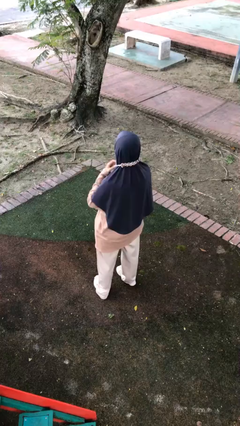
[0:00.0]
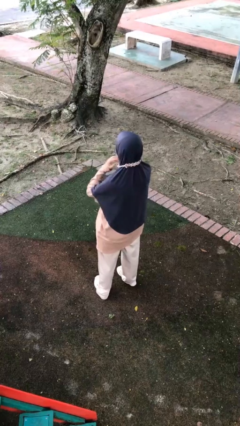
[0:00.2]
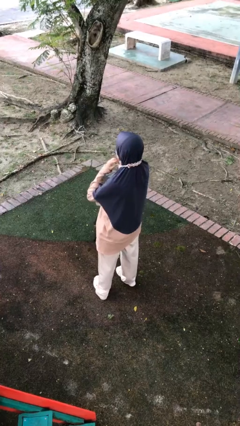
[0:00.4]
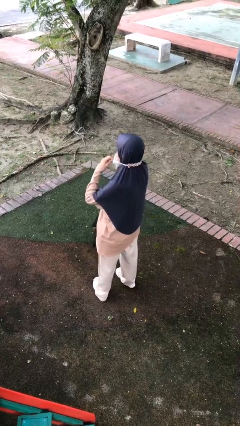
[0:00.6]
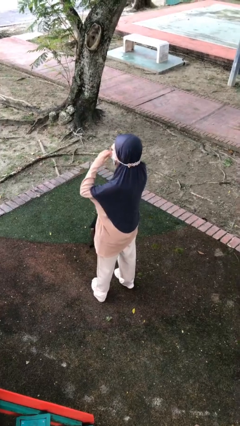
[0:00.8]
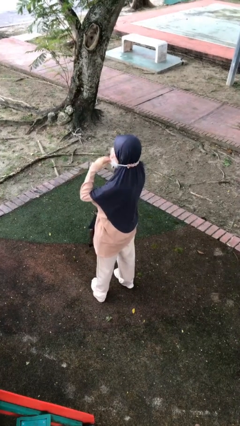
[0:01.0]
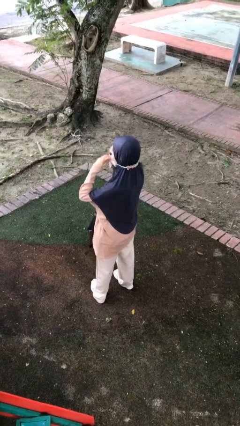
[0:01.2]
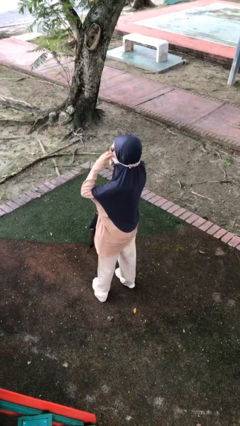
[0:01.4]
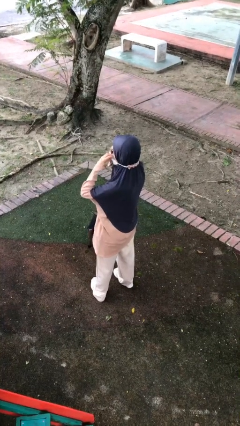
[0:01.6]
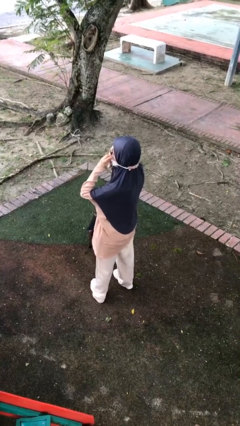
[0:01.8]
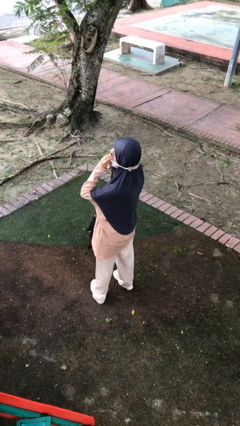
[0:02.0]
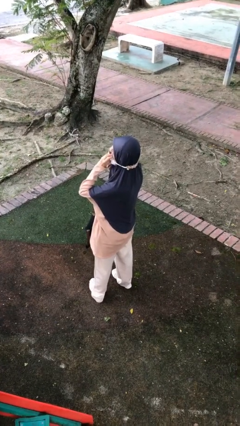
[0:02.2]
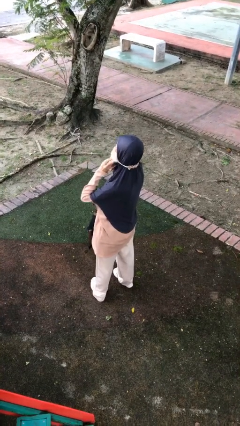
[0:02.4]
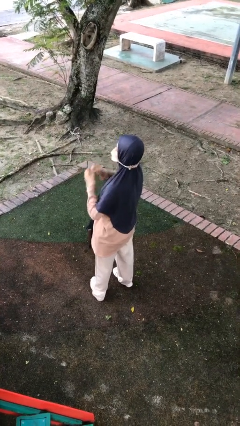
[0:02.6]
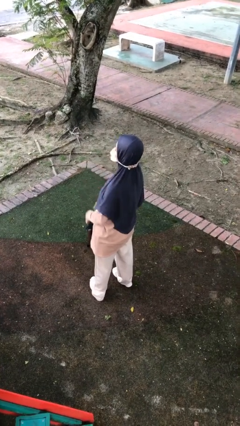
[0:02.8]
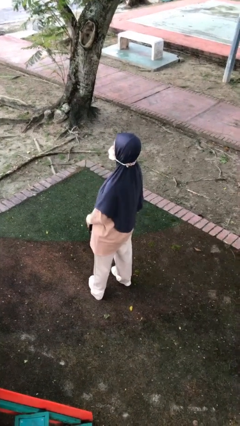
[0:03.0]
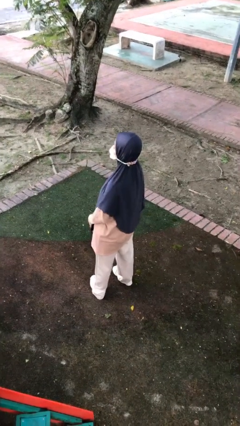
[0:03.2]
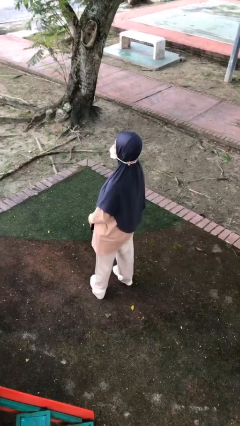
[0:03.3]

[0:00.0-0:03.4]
person puts on facemask

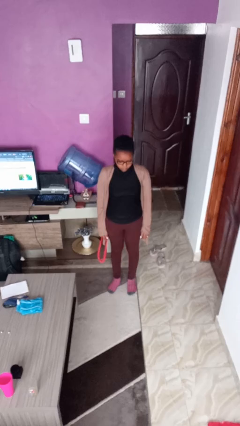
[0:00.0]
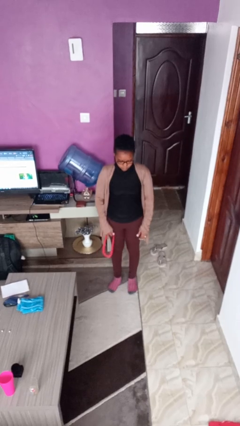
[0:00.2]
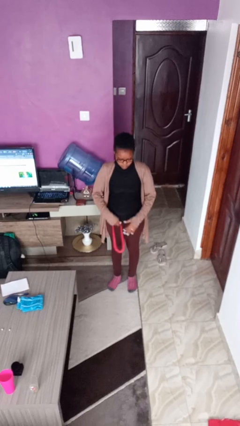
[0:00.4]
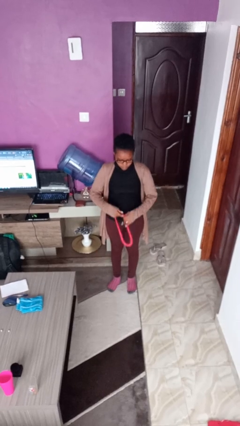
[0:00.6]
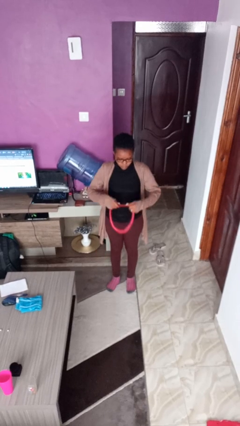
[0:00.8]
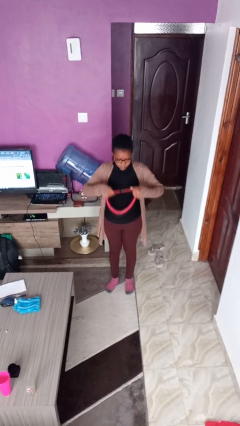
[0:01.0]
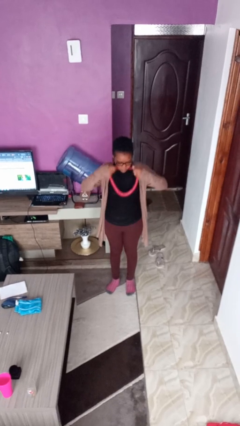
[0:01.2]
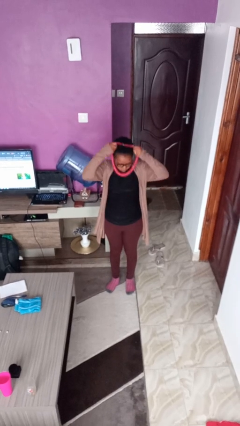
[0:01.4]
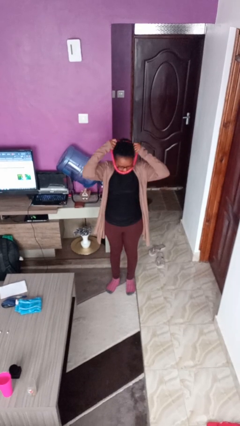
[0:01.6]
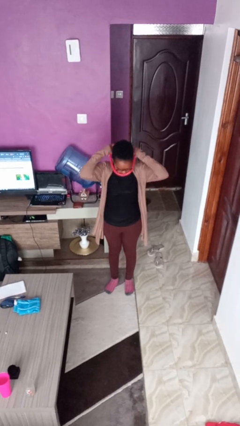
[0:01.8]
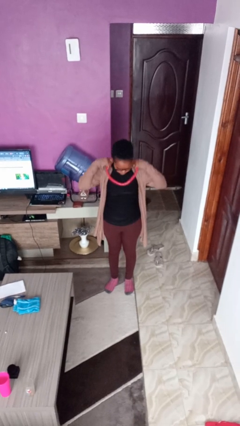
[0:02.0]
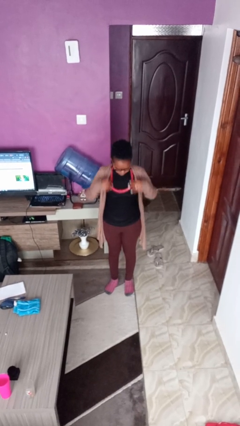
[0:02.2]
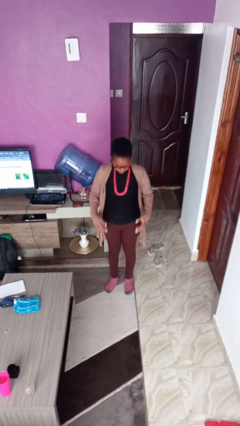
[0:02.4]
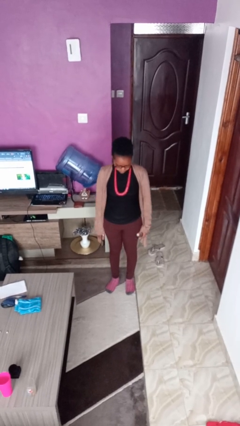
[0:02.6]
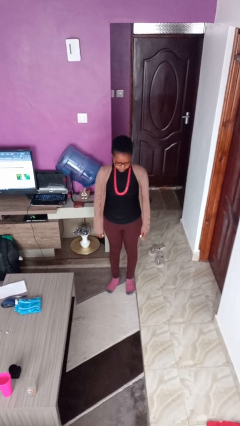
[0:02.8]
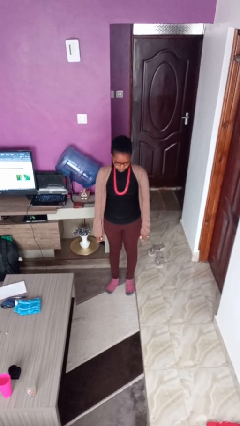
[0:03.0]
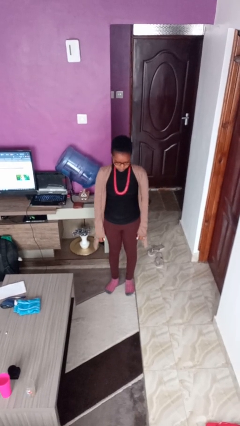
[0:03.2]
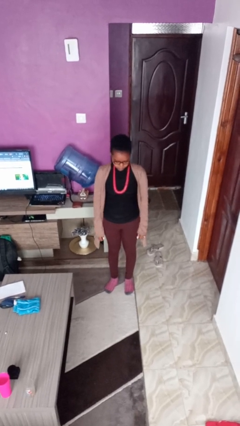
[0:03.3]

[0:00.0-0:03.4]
person puts on necklace

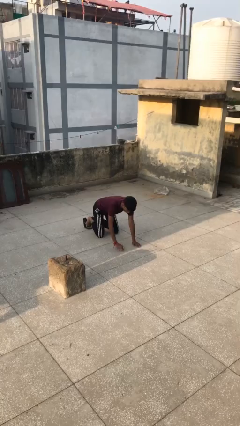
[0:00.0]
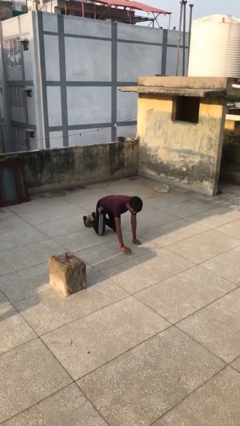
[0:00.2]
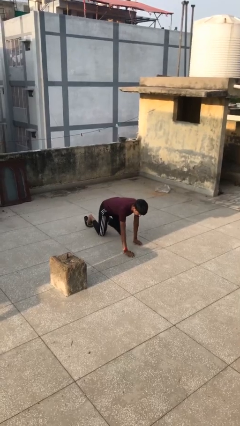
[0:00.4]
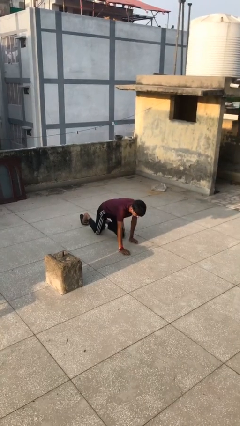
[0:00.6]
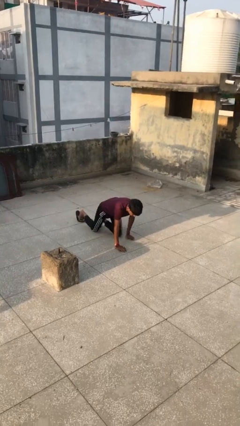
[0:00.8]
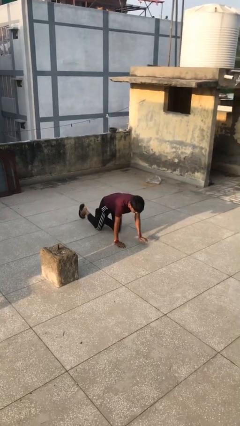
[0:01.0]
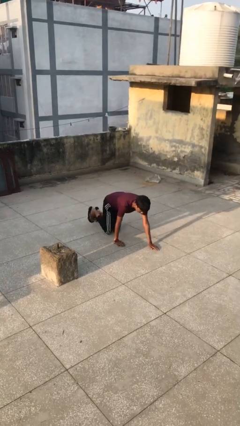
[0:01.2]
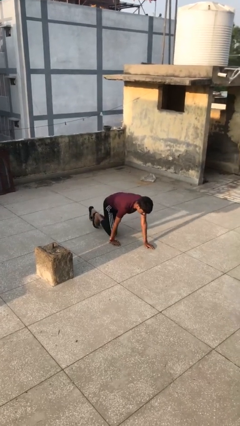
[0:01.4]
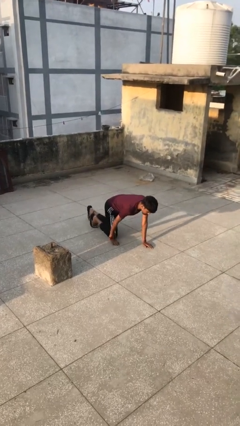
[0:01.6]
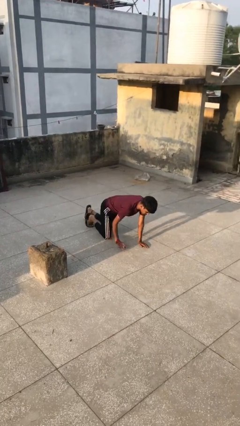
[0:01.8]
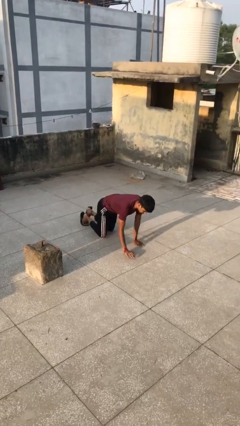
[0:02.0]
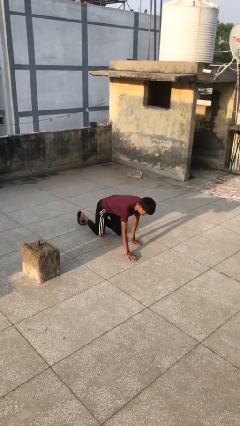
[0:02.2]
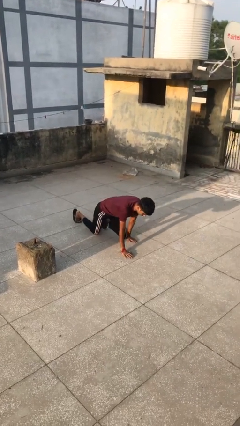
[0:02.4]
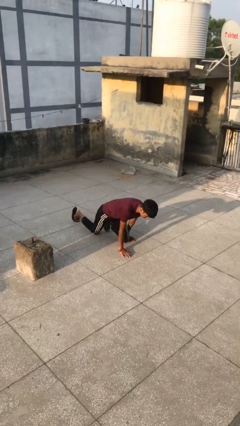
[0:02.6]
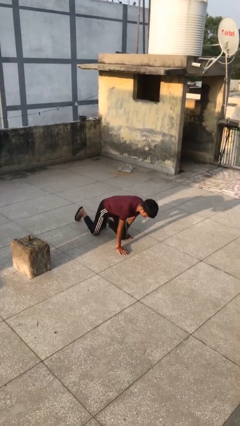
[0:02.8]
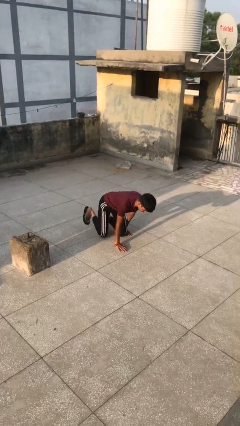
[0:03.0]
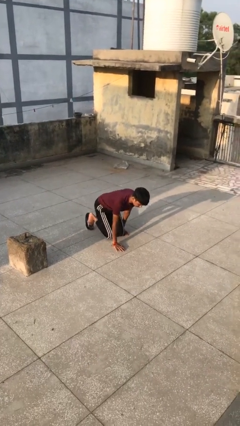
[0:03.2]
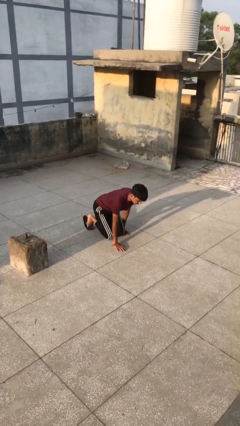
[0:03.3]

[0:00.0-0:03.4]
person crawls

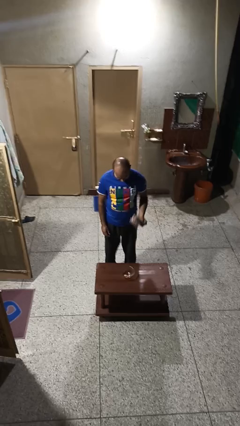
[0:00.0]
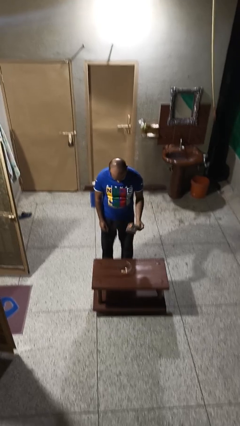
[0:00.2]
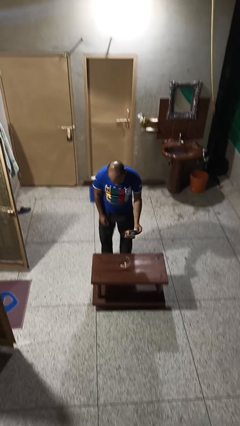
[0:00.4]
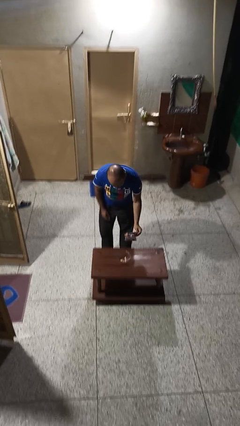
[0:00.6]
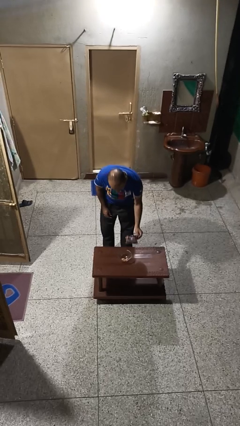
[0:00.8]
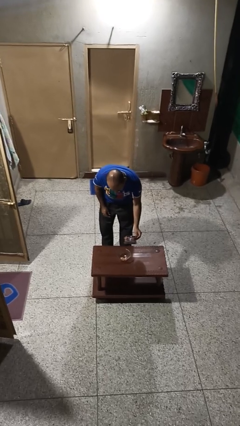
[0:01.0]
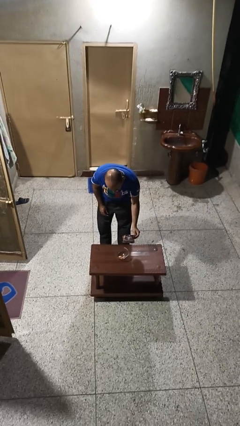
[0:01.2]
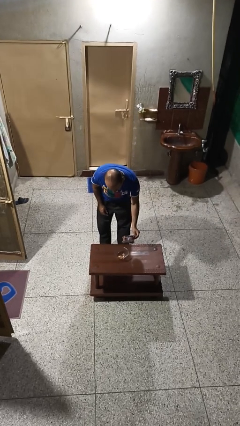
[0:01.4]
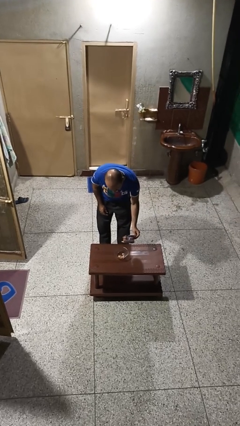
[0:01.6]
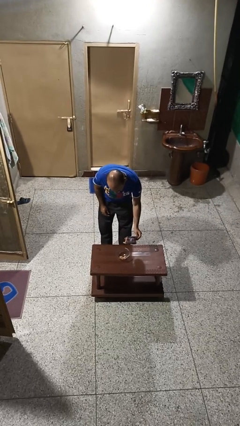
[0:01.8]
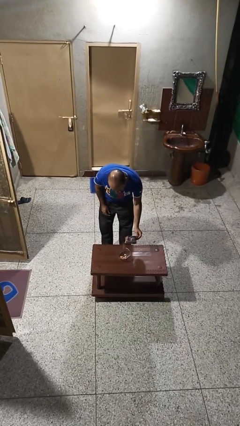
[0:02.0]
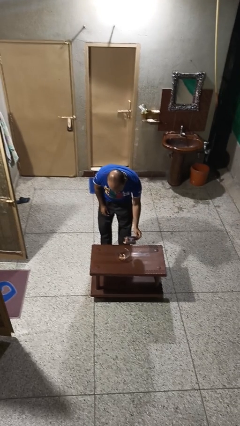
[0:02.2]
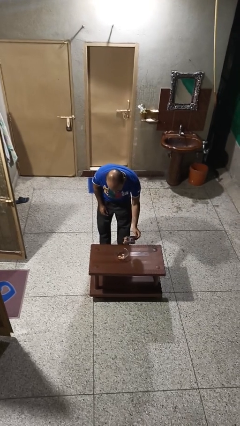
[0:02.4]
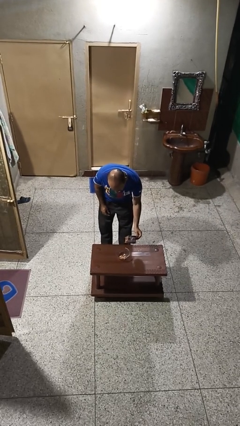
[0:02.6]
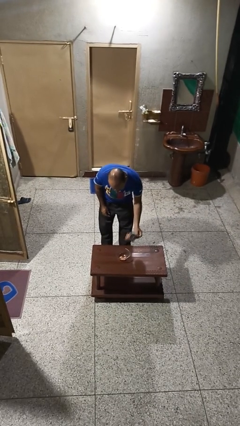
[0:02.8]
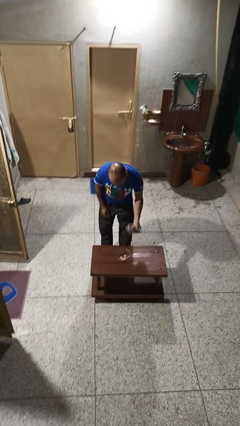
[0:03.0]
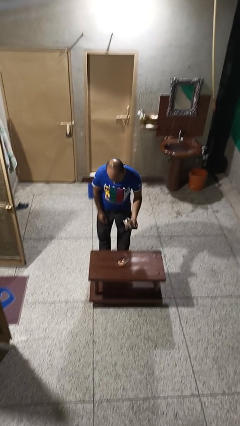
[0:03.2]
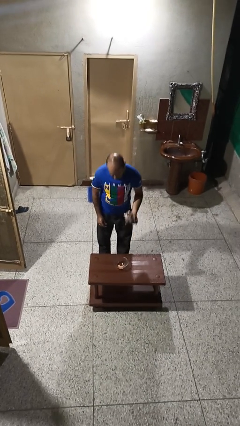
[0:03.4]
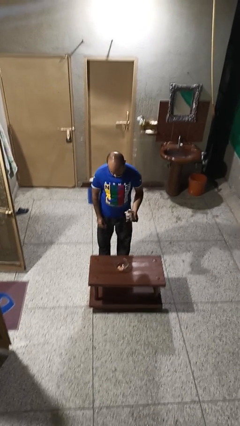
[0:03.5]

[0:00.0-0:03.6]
person pours into bowl

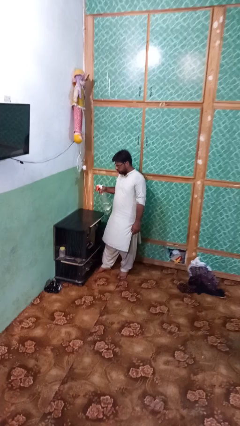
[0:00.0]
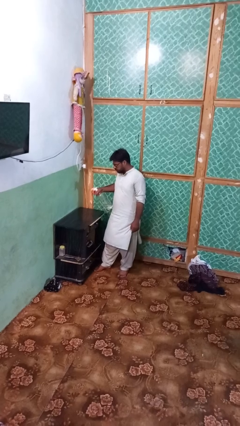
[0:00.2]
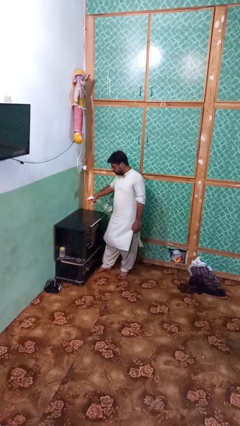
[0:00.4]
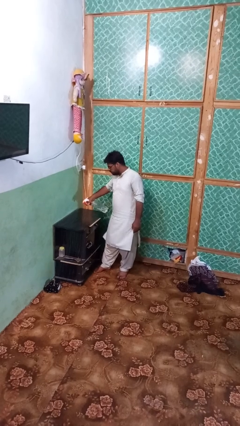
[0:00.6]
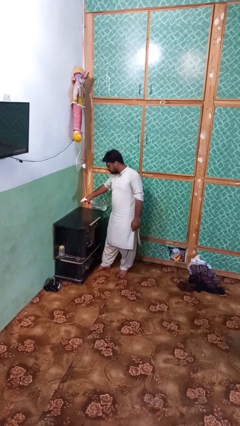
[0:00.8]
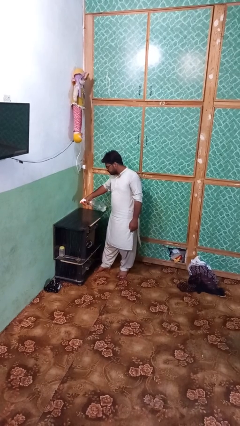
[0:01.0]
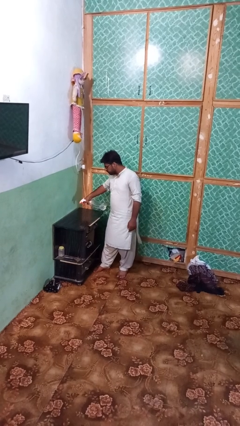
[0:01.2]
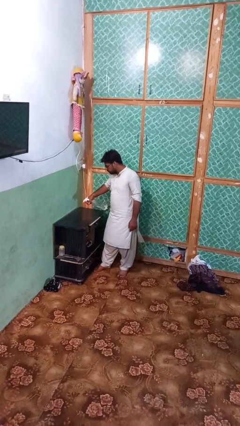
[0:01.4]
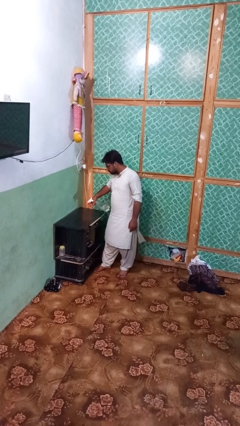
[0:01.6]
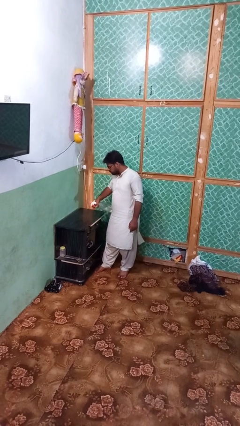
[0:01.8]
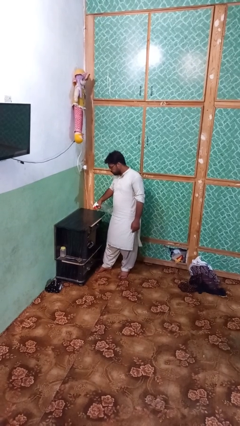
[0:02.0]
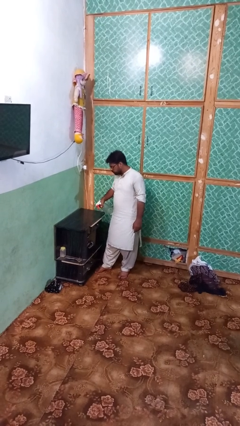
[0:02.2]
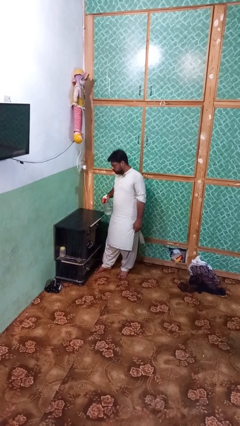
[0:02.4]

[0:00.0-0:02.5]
person sprays from bottle

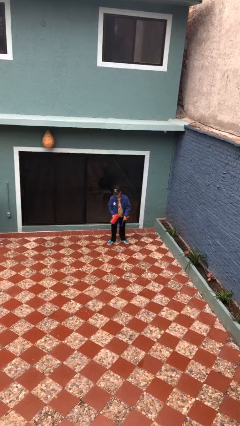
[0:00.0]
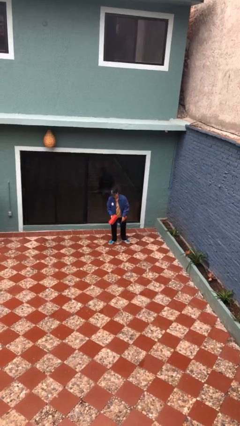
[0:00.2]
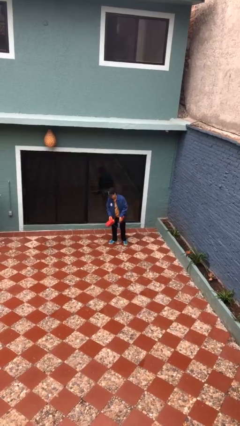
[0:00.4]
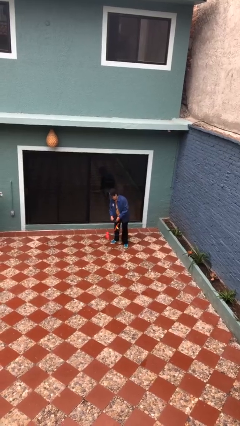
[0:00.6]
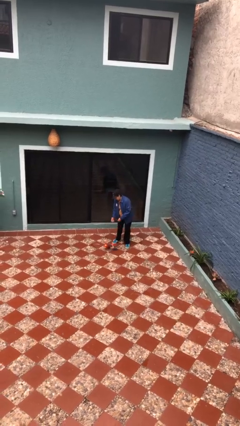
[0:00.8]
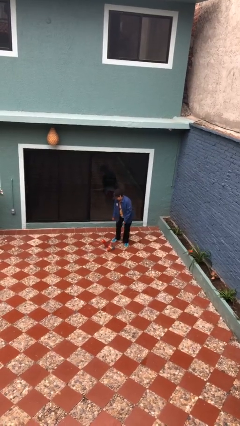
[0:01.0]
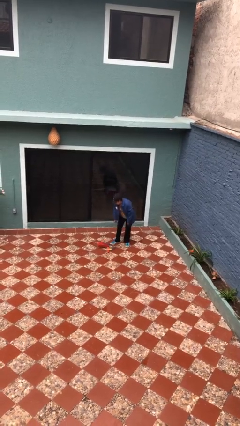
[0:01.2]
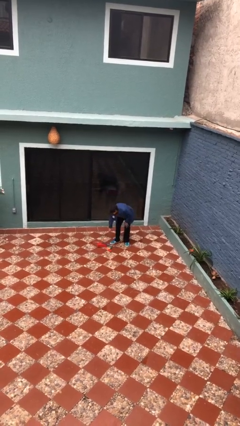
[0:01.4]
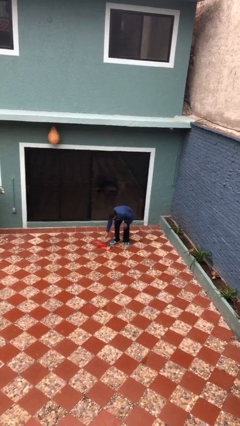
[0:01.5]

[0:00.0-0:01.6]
person drops object
